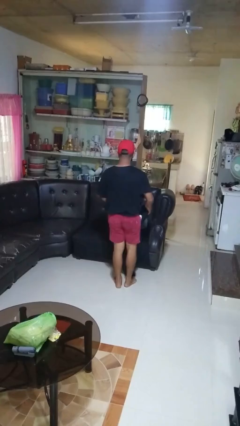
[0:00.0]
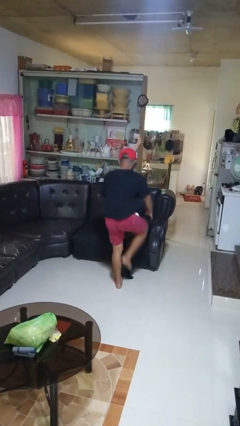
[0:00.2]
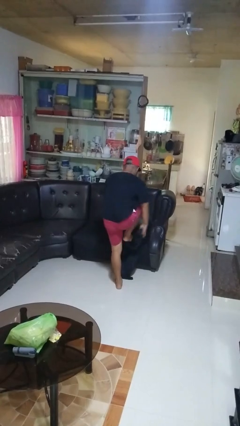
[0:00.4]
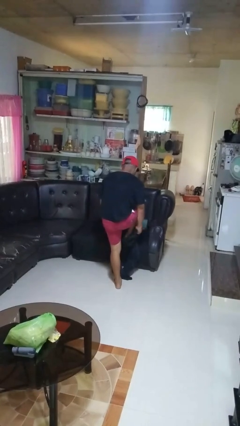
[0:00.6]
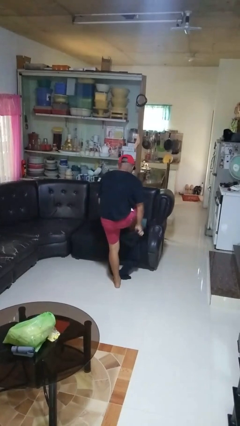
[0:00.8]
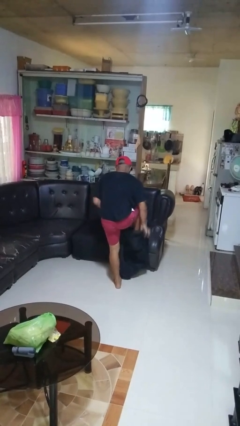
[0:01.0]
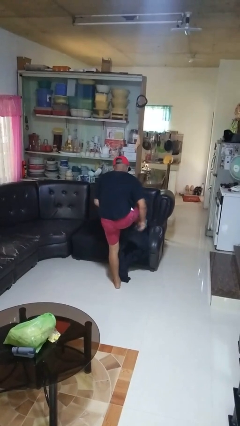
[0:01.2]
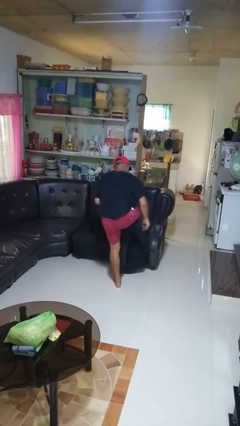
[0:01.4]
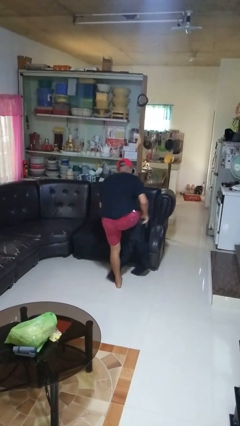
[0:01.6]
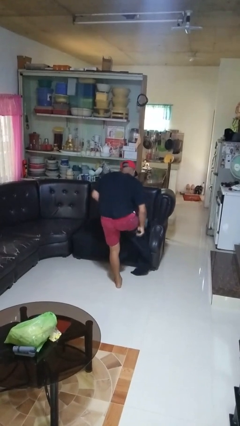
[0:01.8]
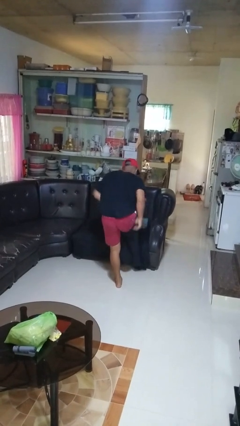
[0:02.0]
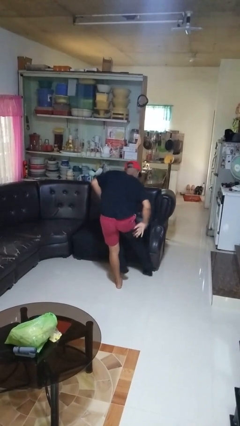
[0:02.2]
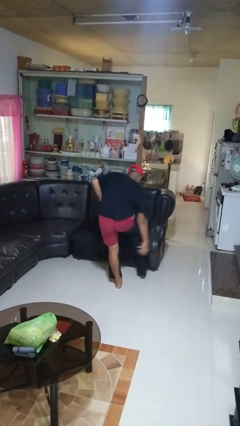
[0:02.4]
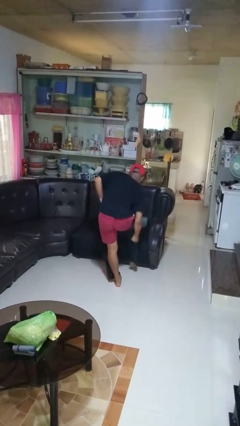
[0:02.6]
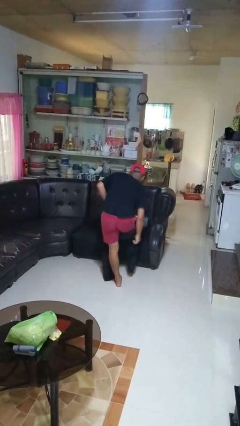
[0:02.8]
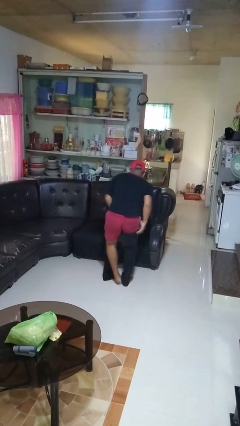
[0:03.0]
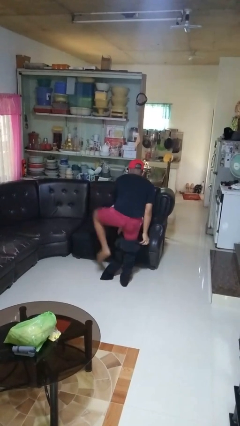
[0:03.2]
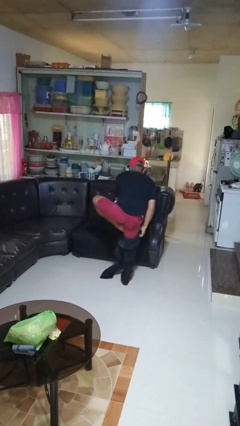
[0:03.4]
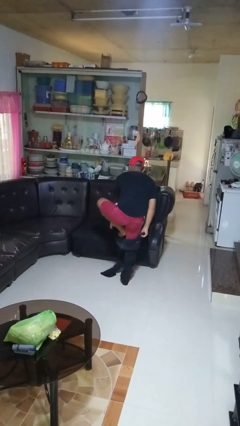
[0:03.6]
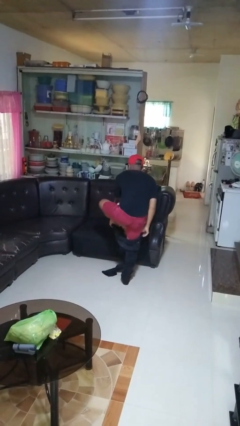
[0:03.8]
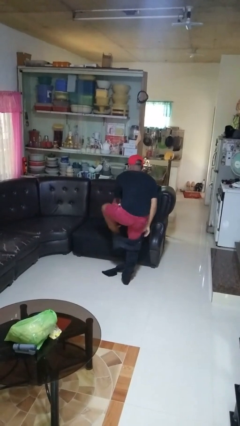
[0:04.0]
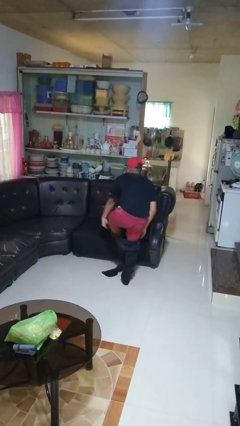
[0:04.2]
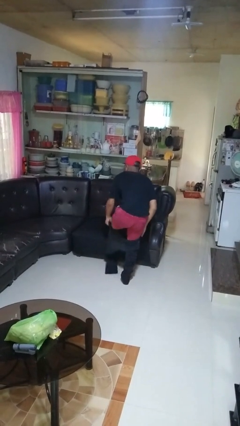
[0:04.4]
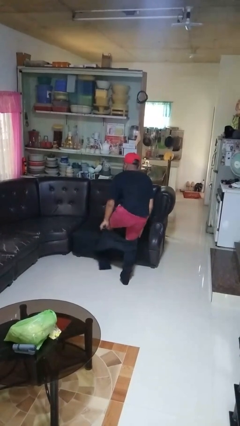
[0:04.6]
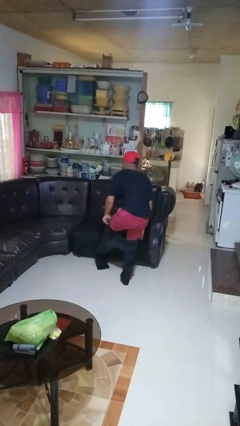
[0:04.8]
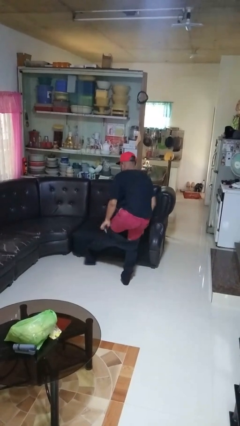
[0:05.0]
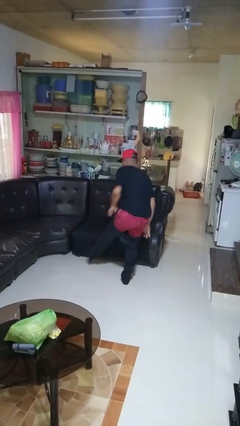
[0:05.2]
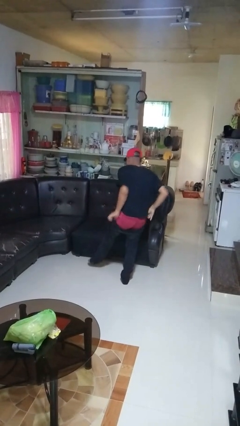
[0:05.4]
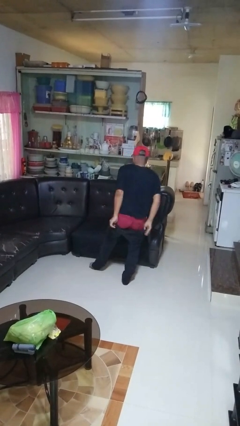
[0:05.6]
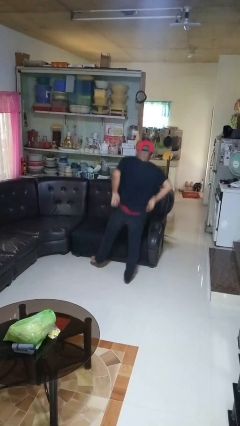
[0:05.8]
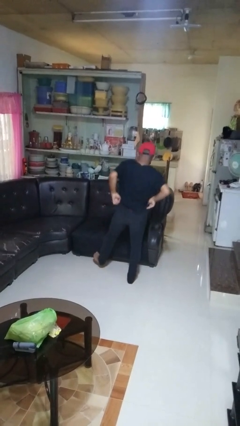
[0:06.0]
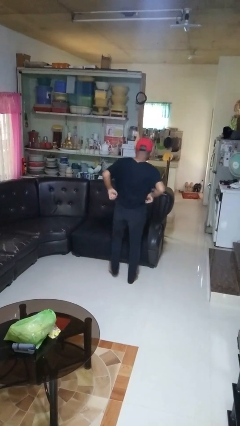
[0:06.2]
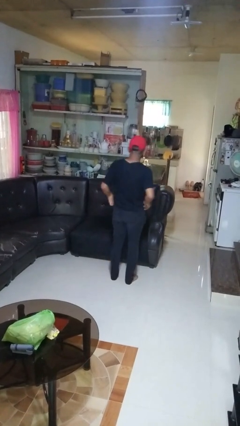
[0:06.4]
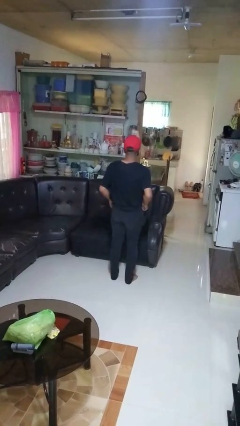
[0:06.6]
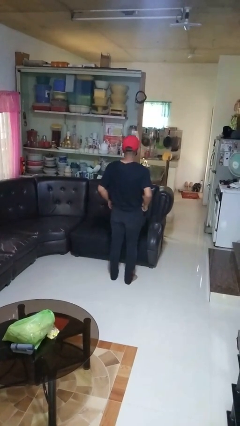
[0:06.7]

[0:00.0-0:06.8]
person puts on pants

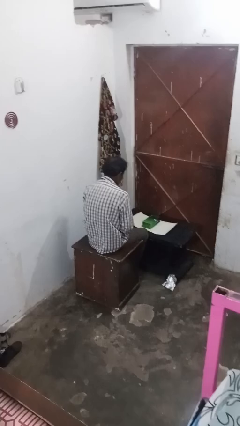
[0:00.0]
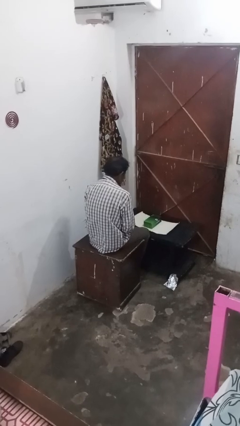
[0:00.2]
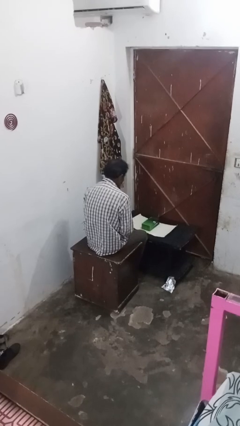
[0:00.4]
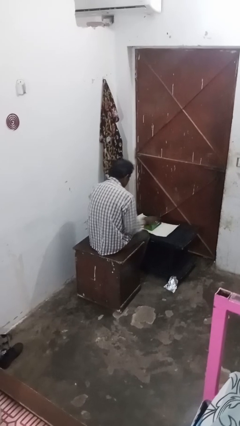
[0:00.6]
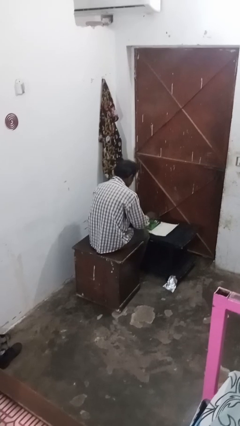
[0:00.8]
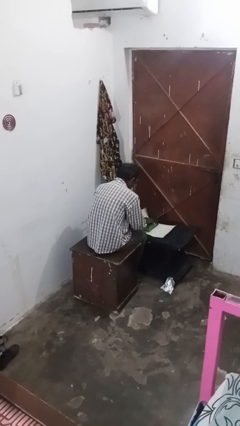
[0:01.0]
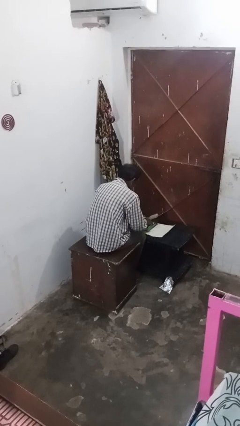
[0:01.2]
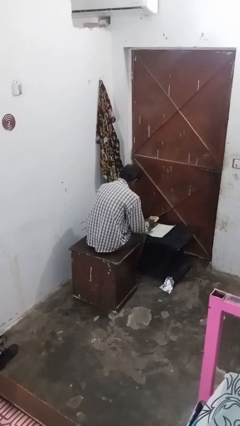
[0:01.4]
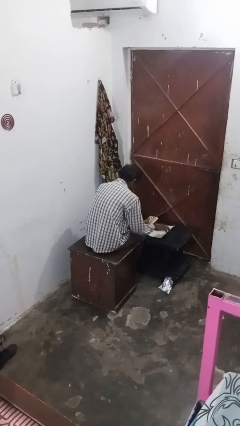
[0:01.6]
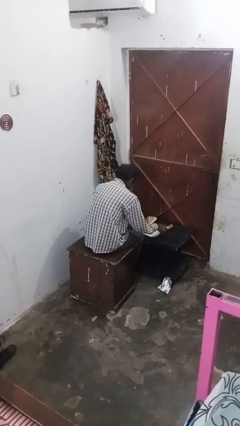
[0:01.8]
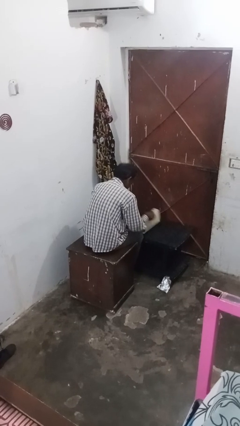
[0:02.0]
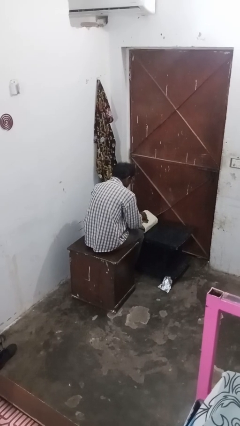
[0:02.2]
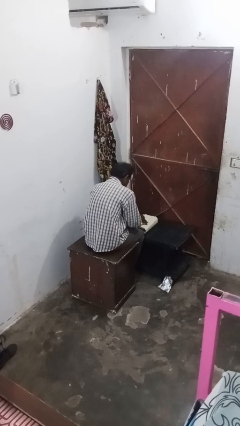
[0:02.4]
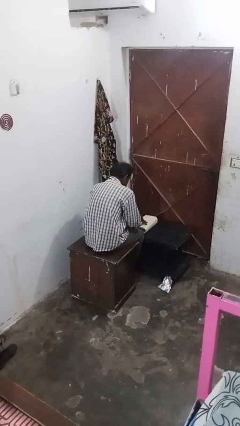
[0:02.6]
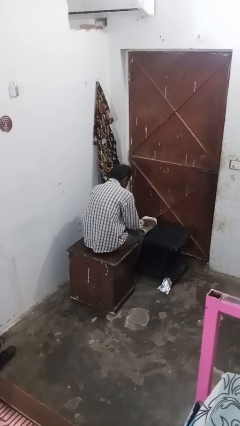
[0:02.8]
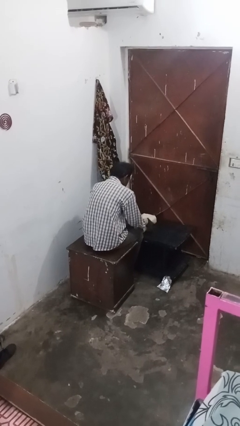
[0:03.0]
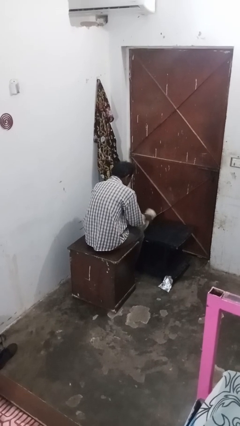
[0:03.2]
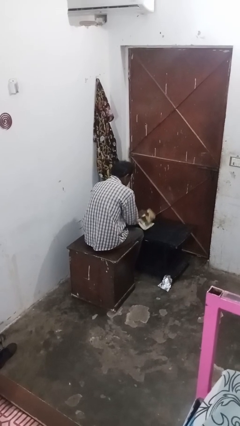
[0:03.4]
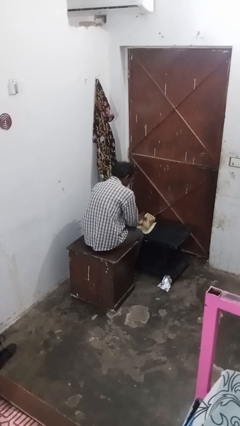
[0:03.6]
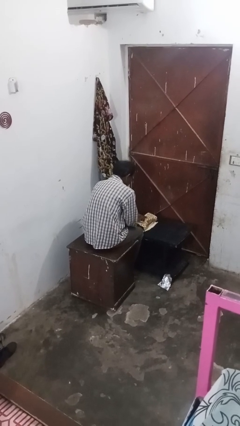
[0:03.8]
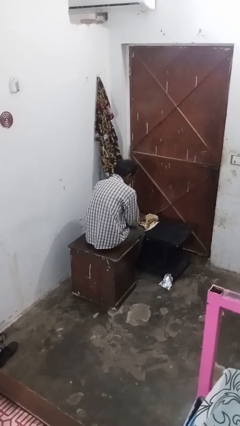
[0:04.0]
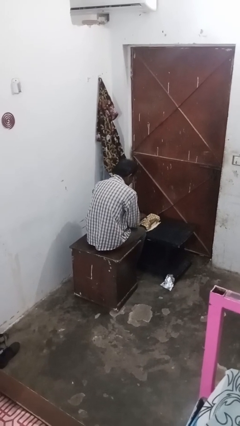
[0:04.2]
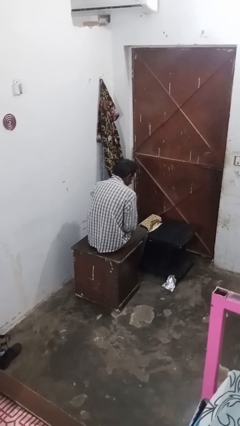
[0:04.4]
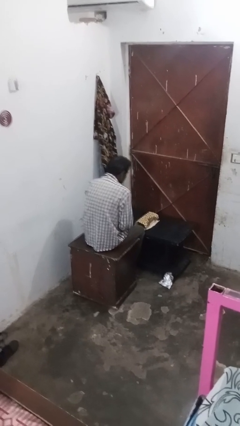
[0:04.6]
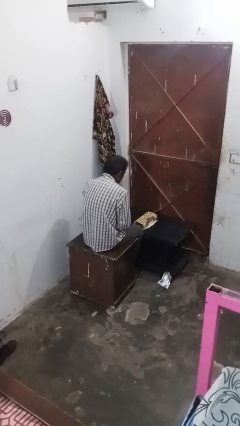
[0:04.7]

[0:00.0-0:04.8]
person wraps box

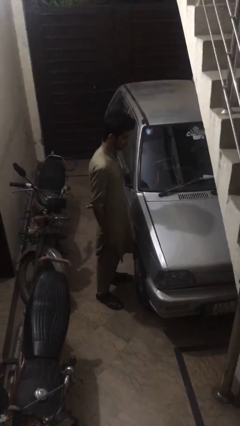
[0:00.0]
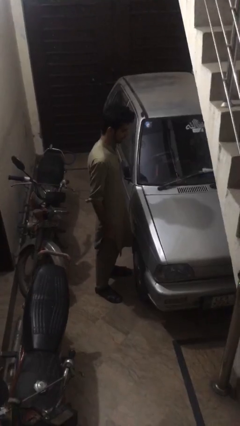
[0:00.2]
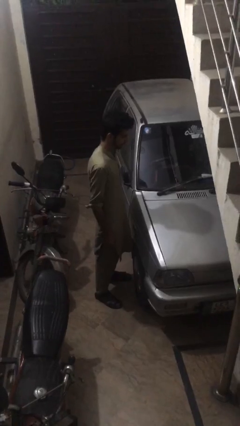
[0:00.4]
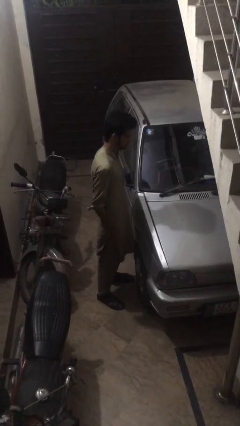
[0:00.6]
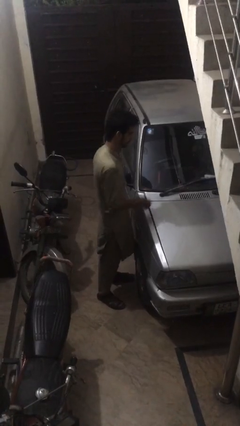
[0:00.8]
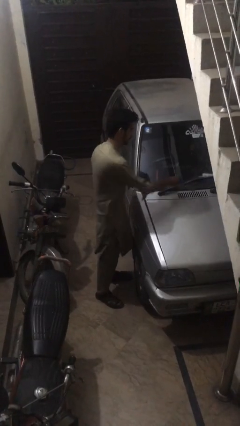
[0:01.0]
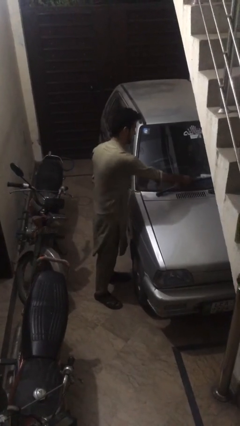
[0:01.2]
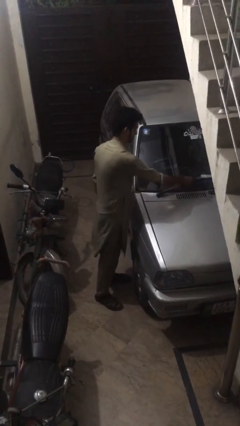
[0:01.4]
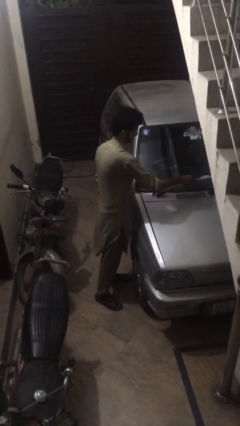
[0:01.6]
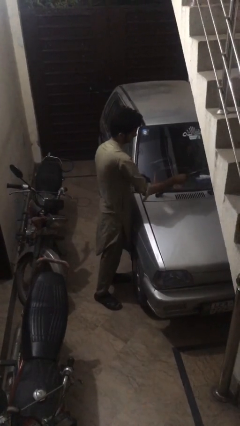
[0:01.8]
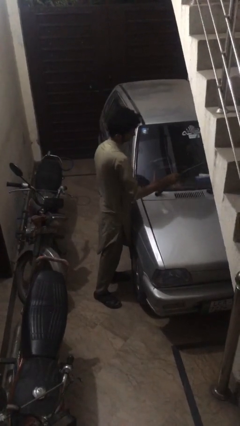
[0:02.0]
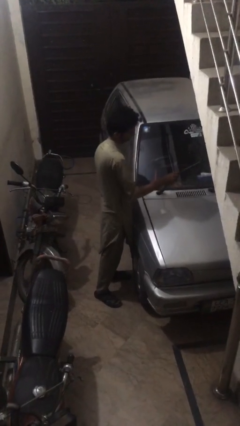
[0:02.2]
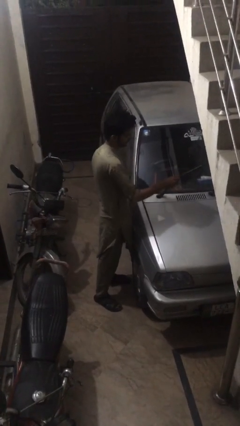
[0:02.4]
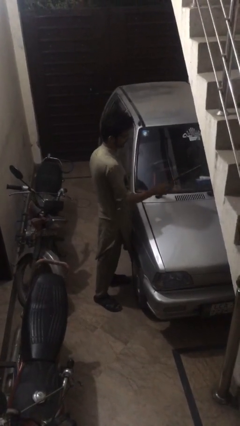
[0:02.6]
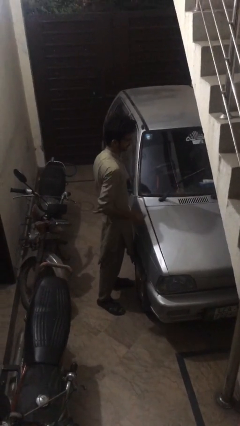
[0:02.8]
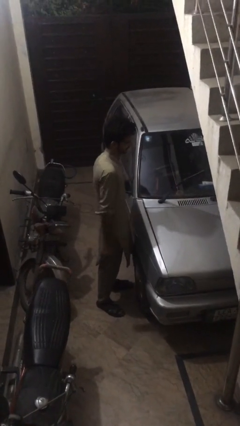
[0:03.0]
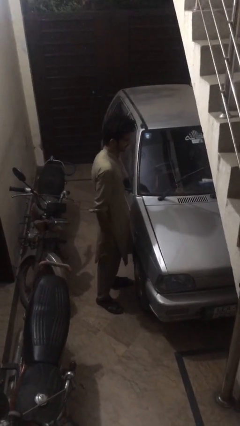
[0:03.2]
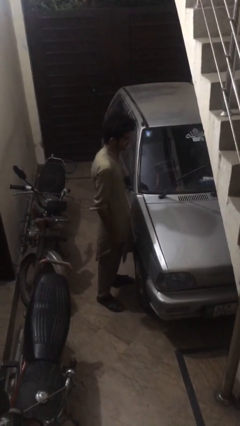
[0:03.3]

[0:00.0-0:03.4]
person flips up car wipers

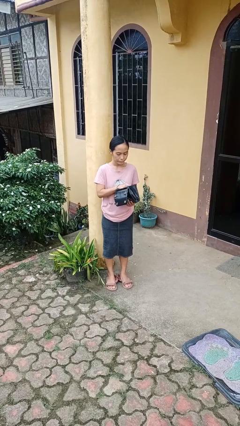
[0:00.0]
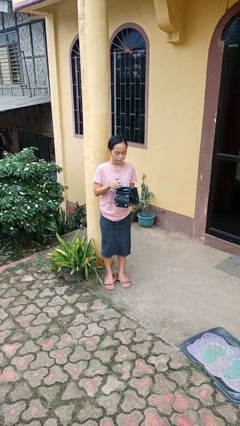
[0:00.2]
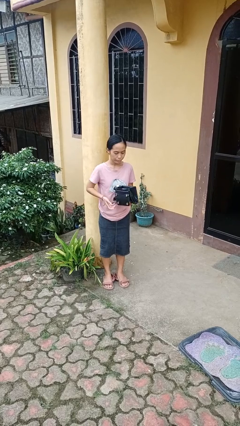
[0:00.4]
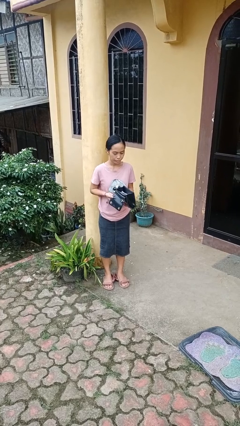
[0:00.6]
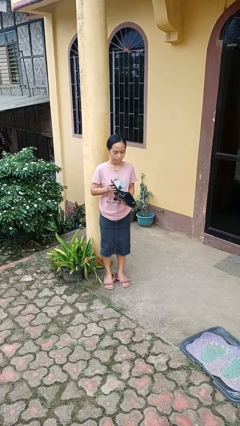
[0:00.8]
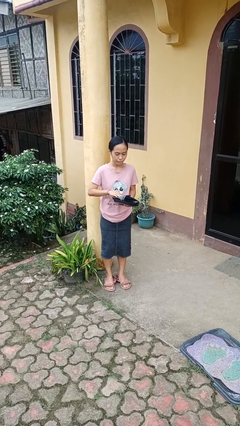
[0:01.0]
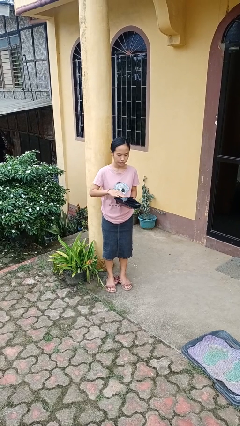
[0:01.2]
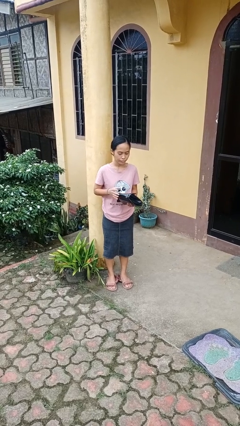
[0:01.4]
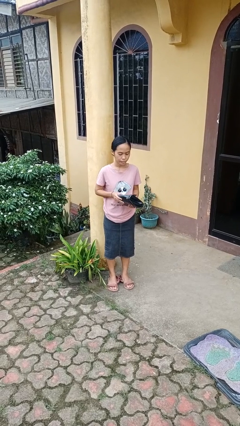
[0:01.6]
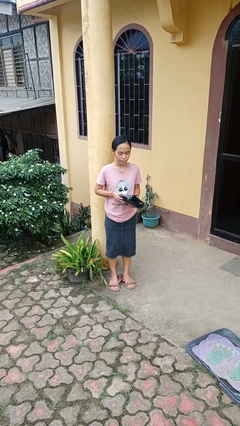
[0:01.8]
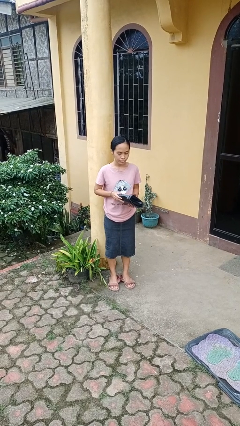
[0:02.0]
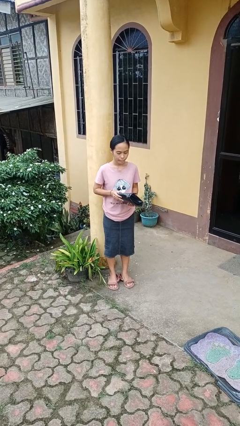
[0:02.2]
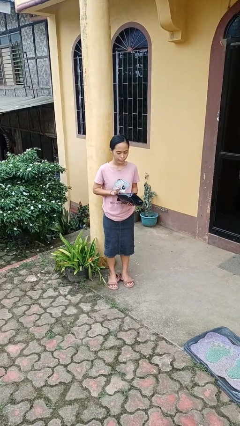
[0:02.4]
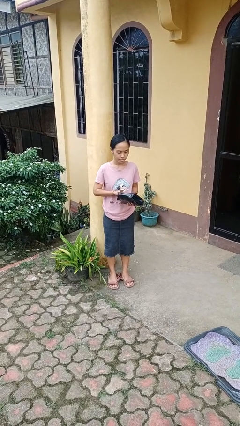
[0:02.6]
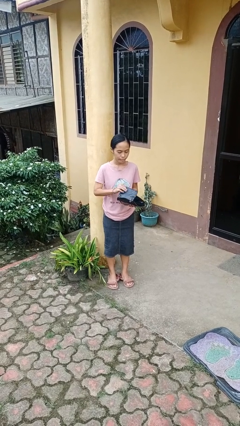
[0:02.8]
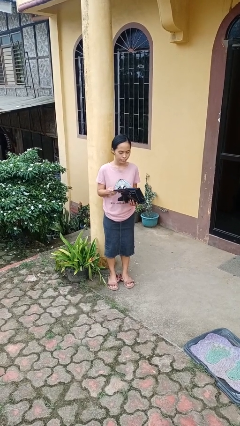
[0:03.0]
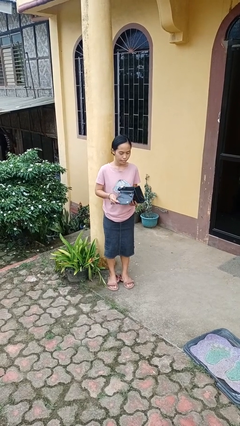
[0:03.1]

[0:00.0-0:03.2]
person puts object into purse
